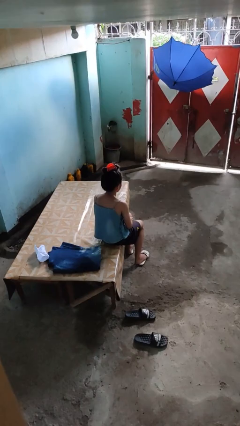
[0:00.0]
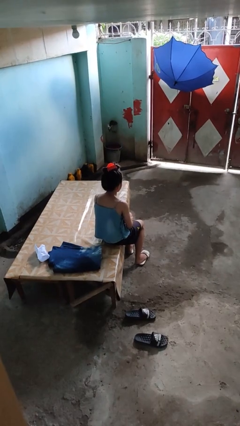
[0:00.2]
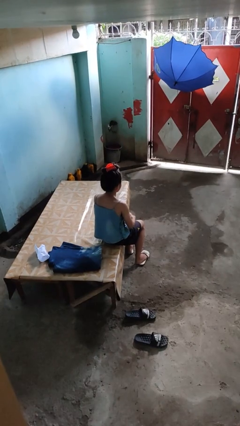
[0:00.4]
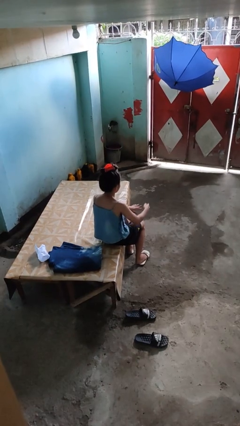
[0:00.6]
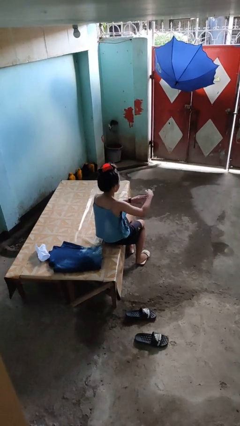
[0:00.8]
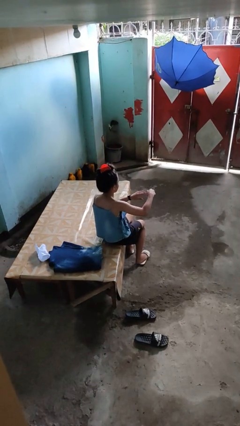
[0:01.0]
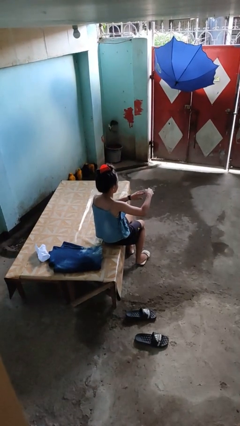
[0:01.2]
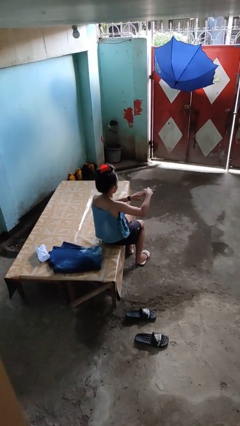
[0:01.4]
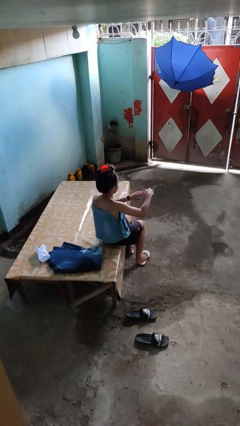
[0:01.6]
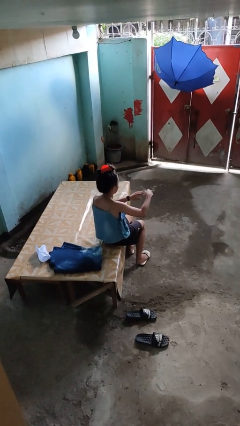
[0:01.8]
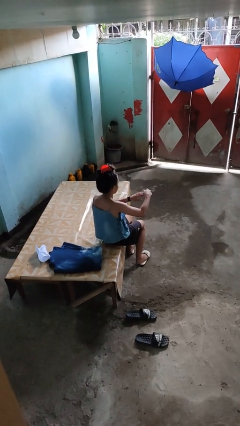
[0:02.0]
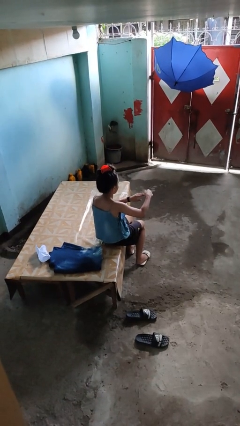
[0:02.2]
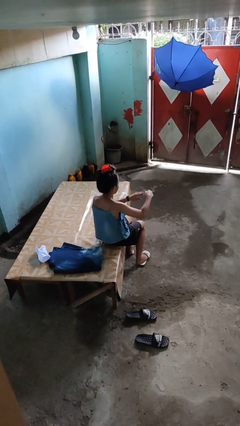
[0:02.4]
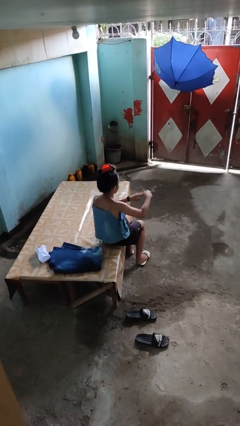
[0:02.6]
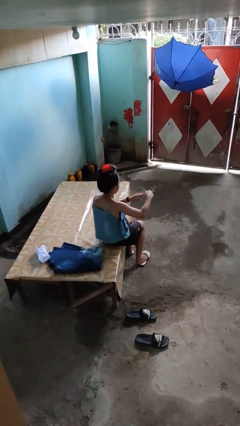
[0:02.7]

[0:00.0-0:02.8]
person files fingernails

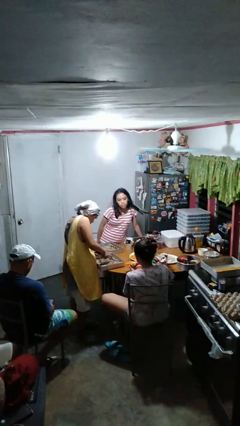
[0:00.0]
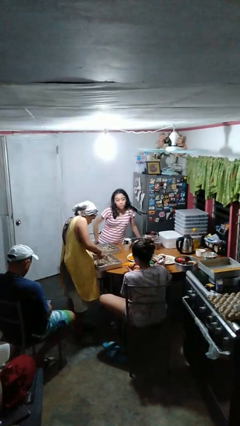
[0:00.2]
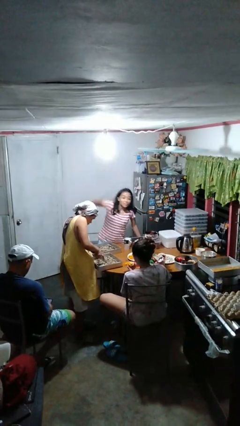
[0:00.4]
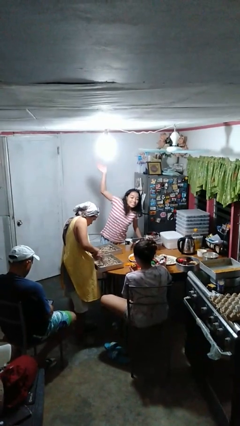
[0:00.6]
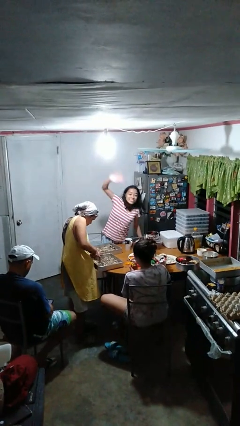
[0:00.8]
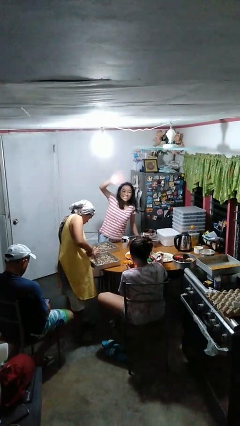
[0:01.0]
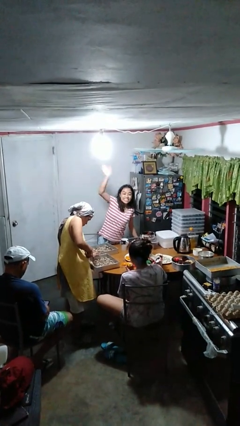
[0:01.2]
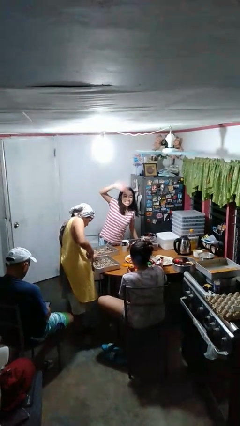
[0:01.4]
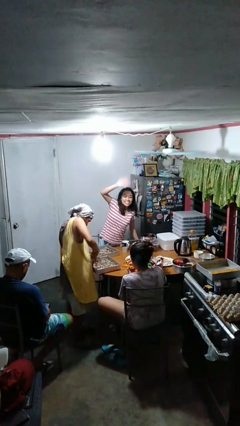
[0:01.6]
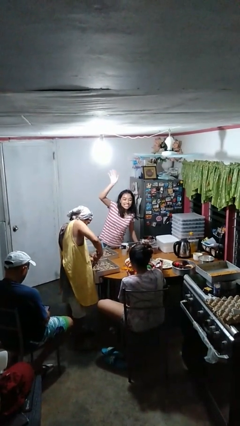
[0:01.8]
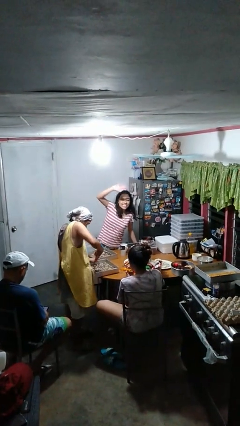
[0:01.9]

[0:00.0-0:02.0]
person waves at person

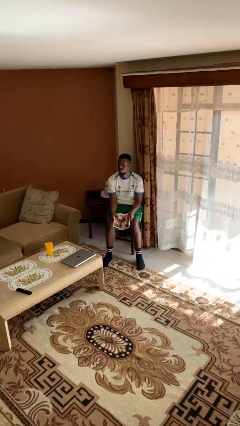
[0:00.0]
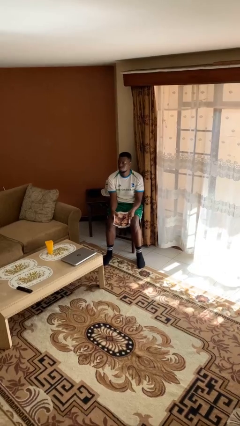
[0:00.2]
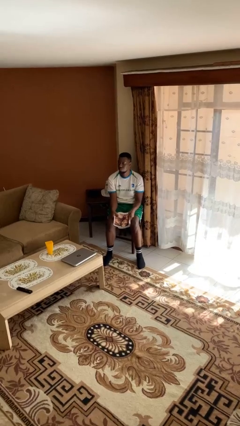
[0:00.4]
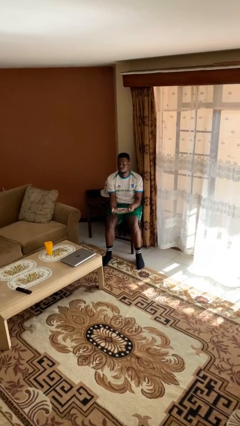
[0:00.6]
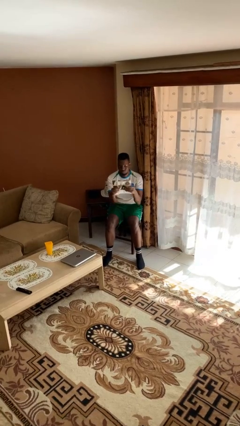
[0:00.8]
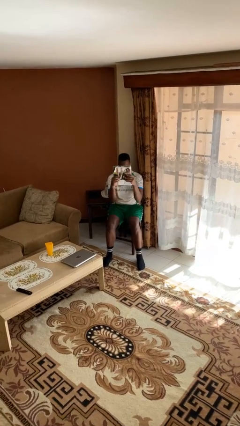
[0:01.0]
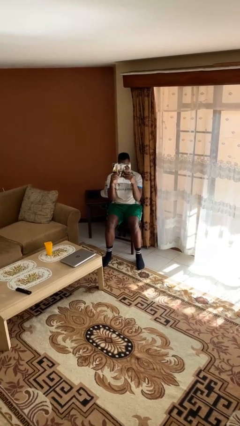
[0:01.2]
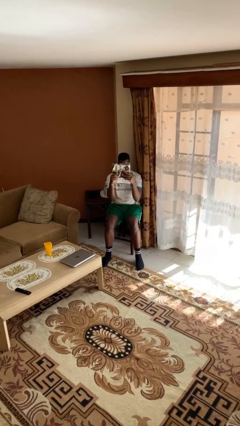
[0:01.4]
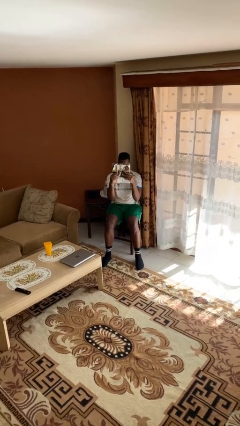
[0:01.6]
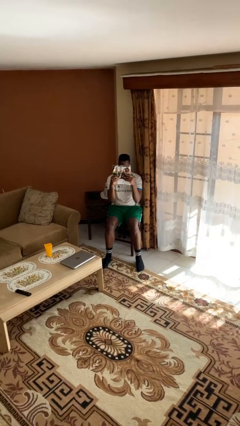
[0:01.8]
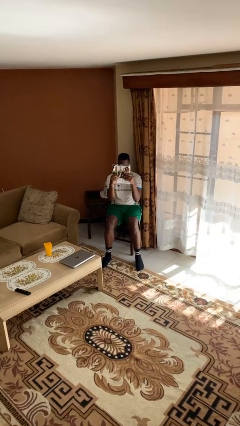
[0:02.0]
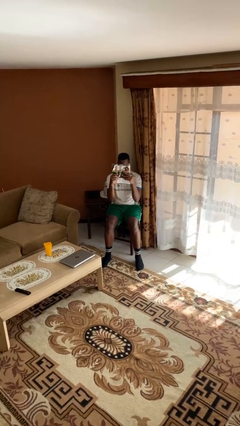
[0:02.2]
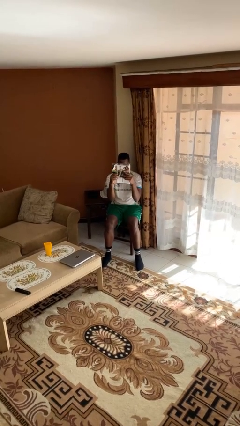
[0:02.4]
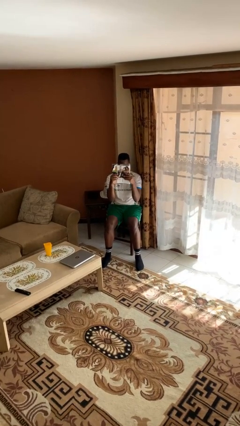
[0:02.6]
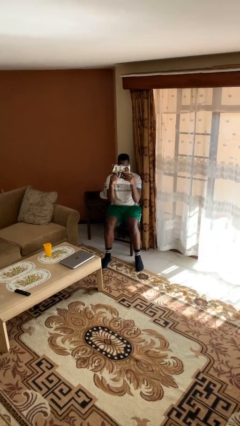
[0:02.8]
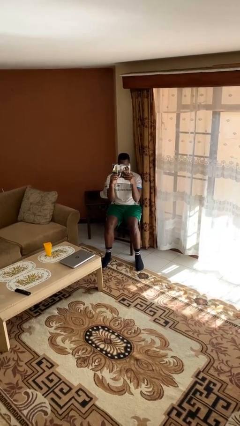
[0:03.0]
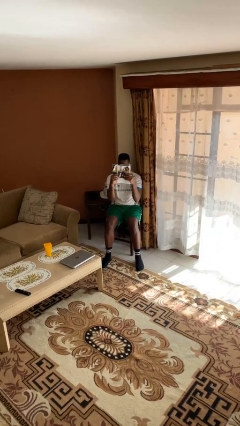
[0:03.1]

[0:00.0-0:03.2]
person reads document

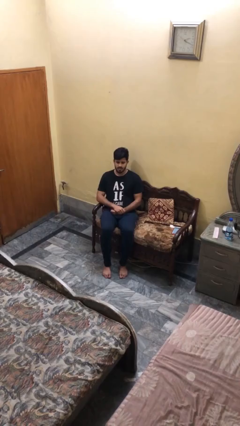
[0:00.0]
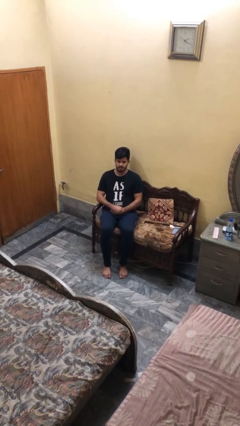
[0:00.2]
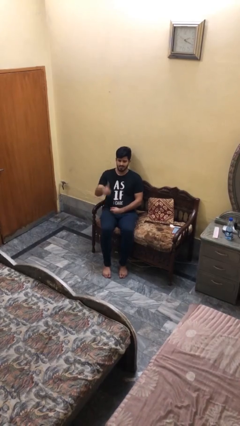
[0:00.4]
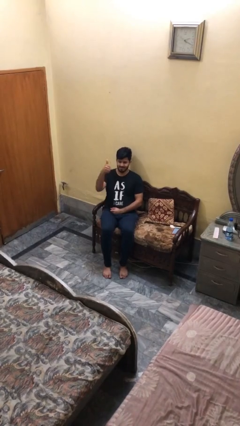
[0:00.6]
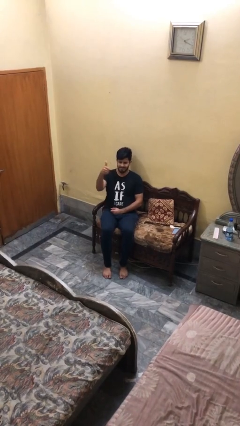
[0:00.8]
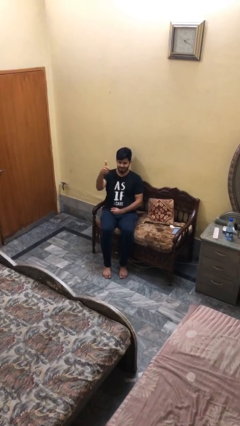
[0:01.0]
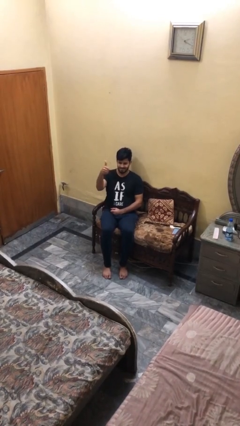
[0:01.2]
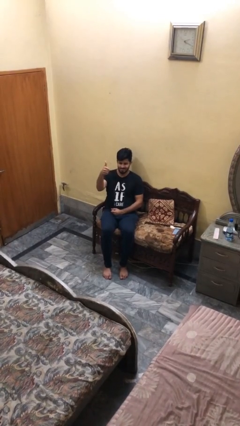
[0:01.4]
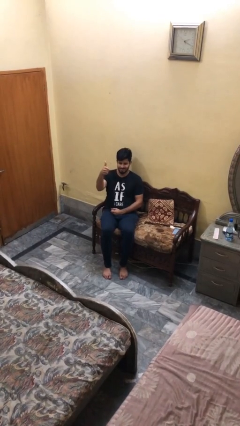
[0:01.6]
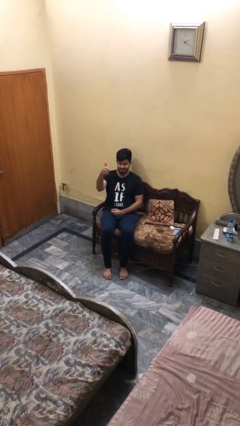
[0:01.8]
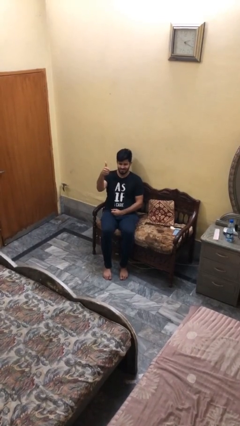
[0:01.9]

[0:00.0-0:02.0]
person gestures thumbs up

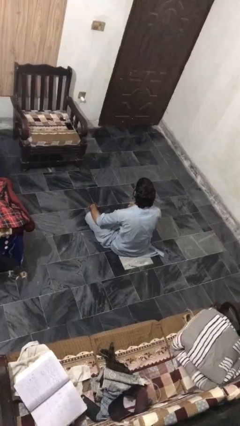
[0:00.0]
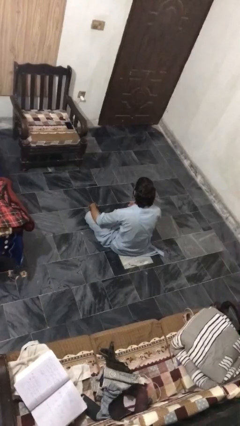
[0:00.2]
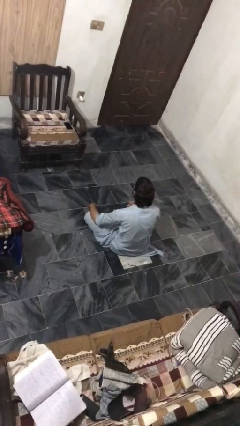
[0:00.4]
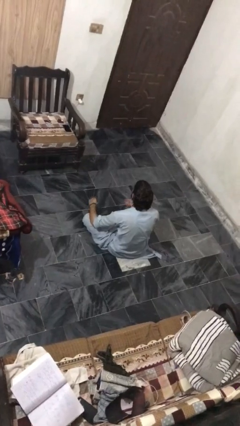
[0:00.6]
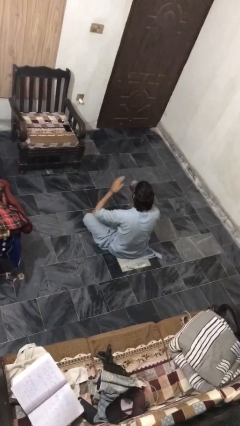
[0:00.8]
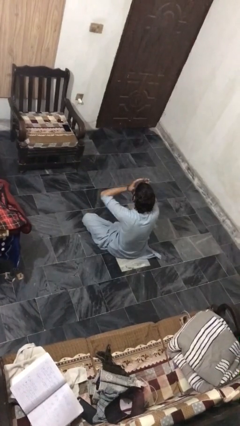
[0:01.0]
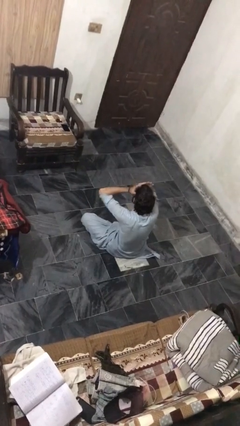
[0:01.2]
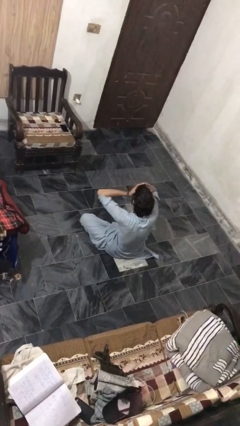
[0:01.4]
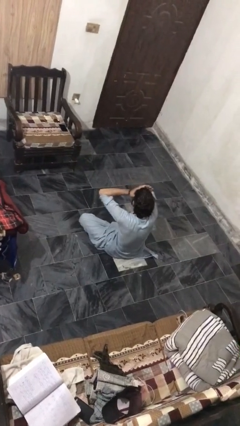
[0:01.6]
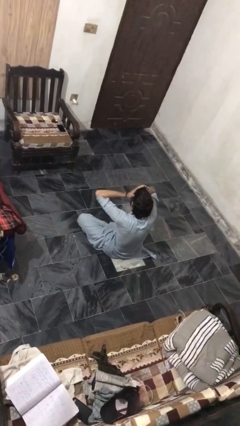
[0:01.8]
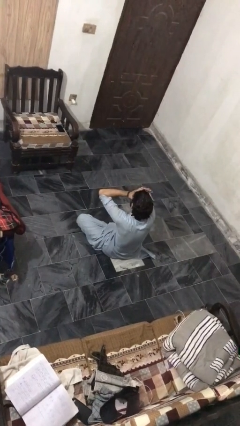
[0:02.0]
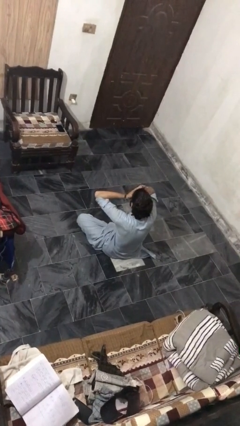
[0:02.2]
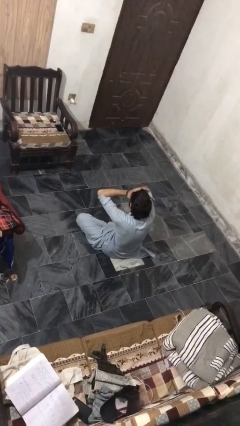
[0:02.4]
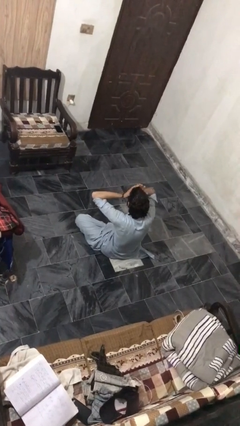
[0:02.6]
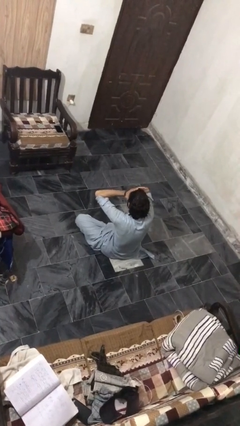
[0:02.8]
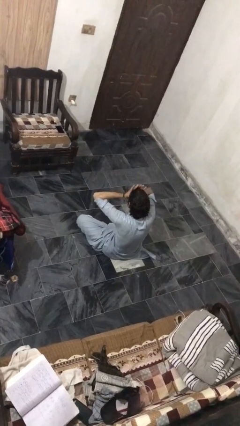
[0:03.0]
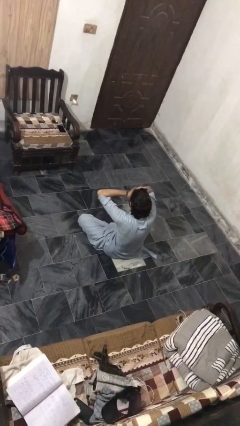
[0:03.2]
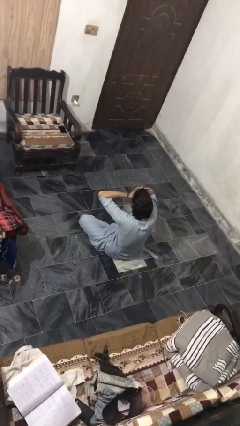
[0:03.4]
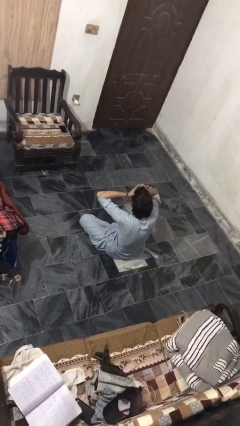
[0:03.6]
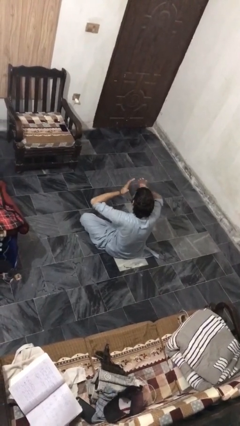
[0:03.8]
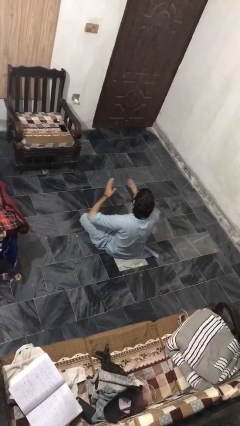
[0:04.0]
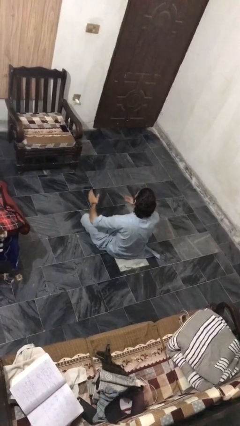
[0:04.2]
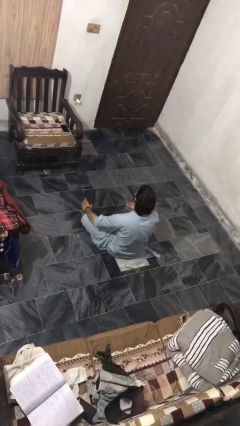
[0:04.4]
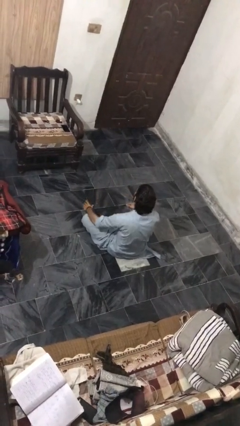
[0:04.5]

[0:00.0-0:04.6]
person rubs eyes

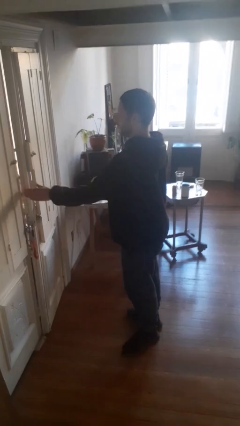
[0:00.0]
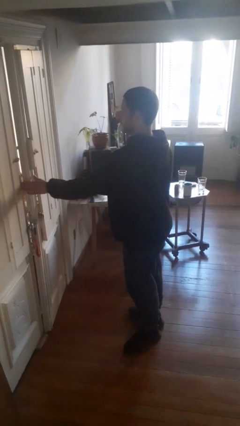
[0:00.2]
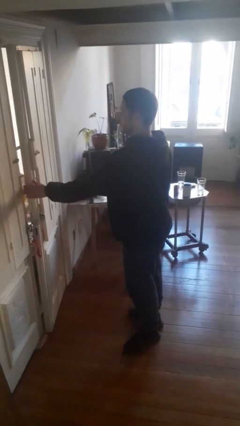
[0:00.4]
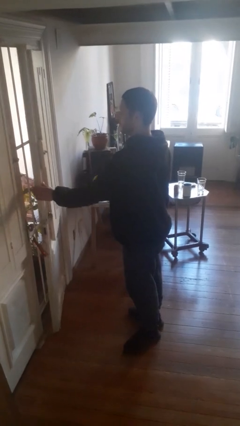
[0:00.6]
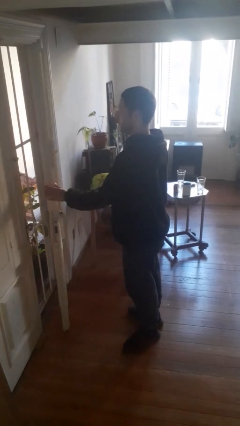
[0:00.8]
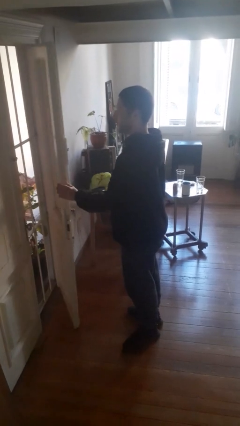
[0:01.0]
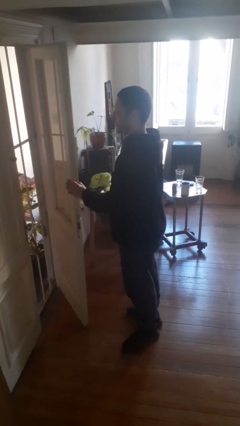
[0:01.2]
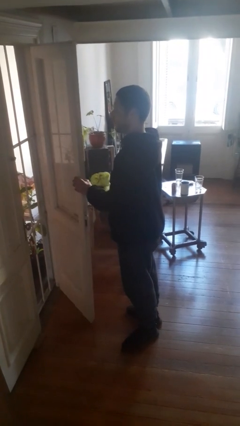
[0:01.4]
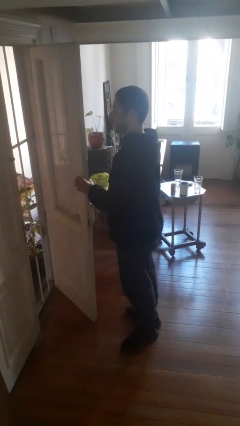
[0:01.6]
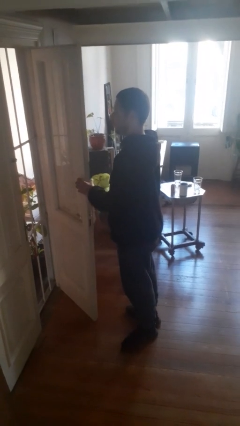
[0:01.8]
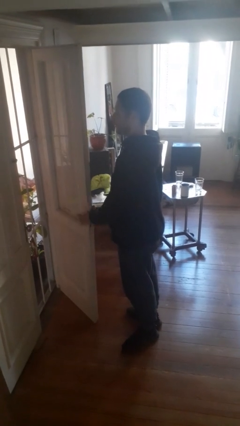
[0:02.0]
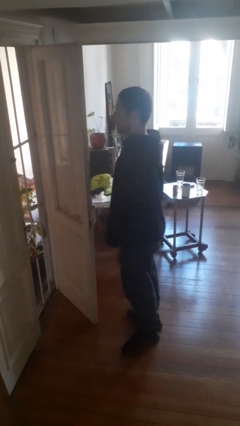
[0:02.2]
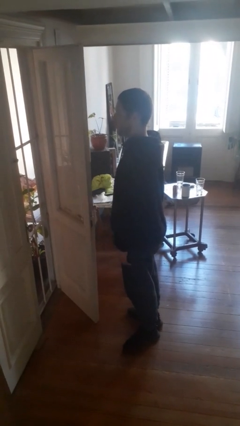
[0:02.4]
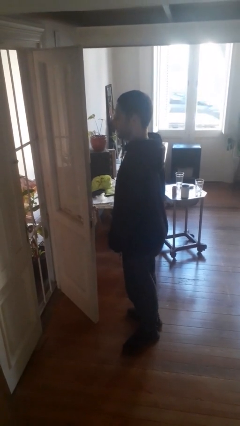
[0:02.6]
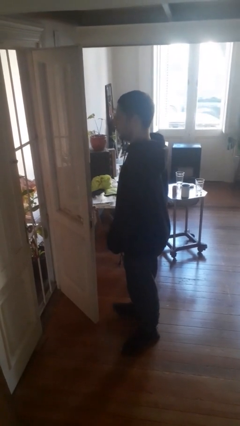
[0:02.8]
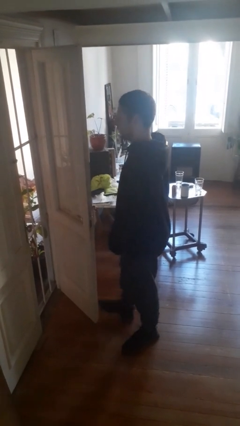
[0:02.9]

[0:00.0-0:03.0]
person opens facility door
